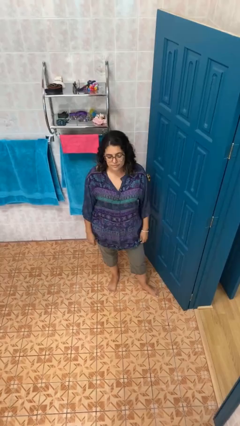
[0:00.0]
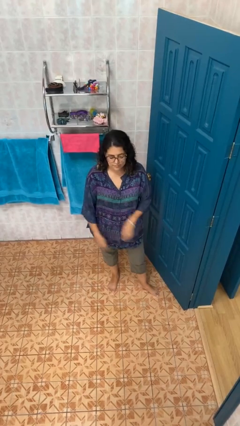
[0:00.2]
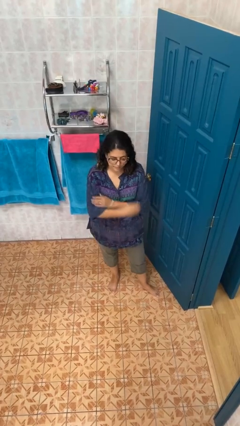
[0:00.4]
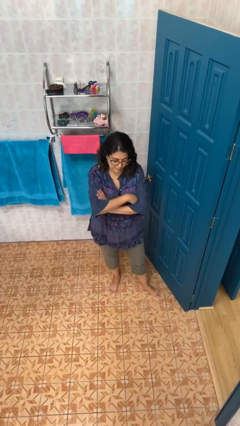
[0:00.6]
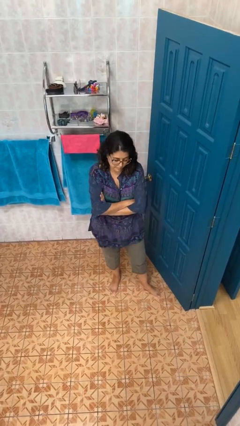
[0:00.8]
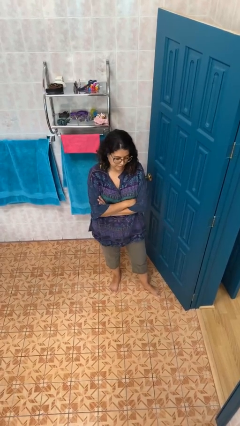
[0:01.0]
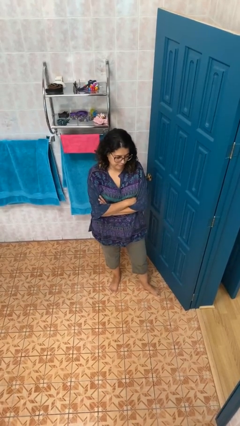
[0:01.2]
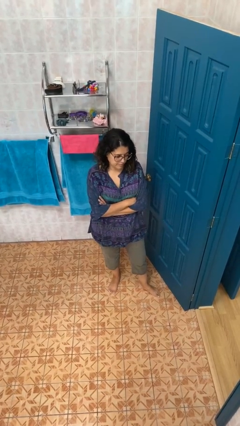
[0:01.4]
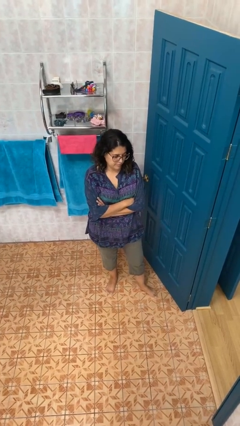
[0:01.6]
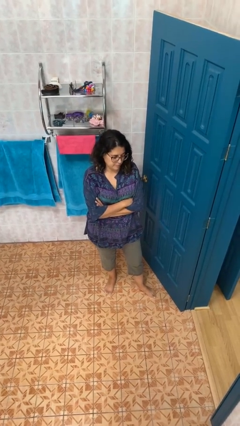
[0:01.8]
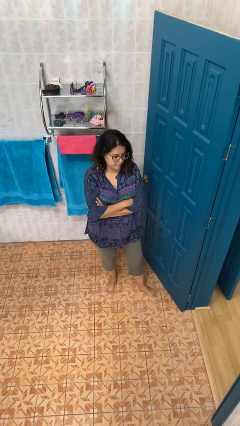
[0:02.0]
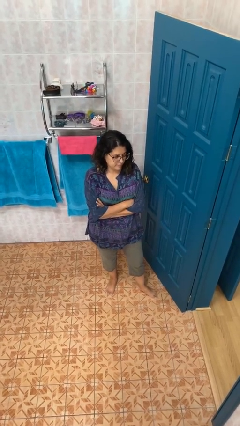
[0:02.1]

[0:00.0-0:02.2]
person crosses arms

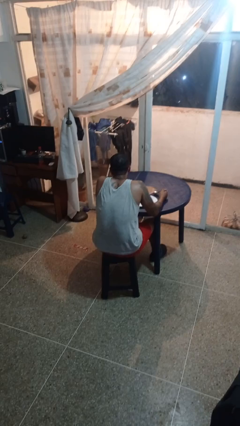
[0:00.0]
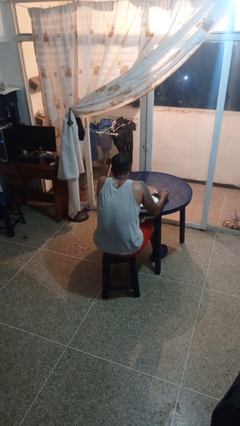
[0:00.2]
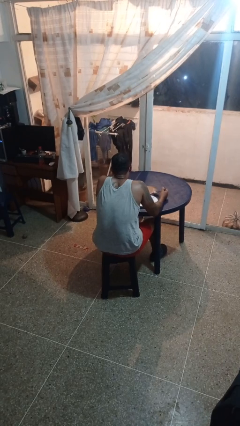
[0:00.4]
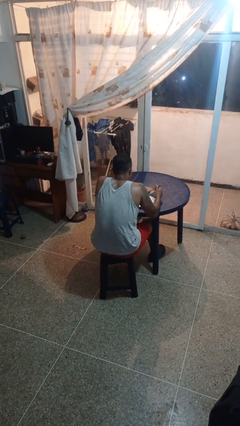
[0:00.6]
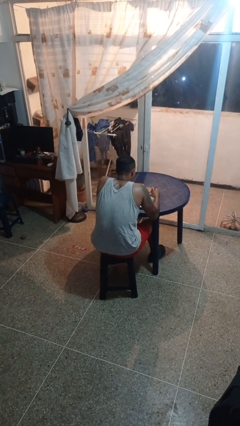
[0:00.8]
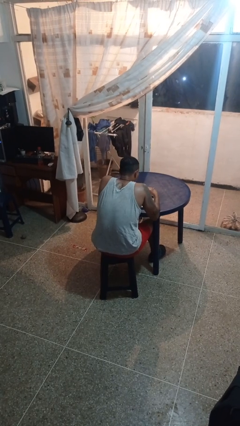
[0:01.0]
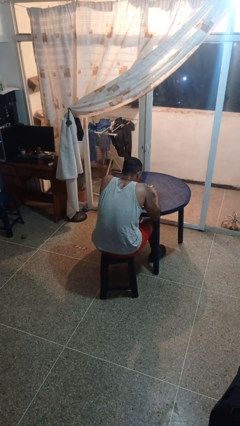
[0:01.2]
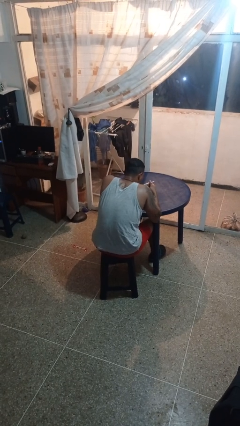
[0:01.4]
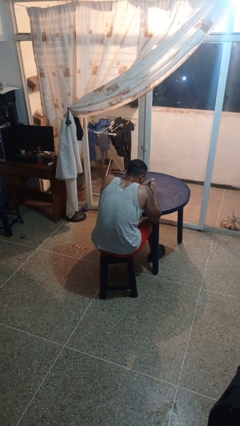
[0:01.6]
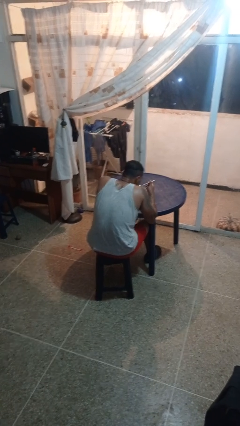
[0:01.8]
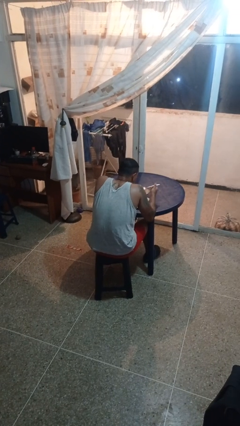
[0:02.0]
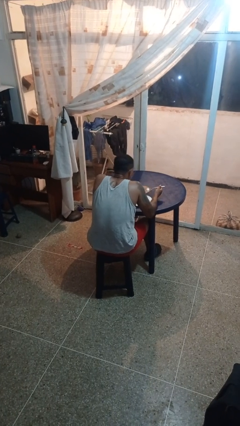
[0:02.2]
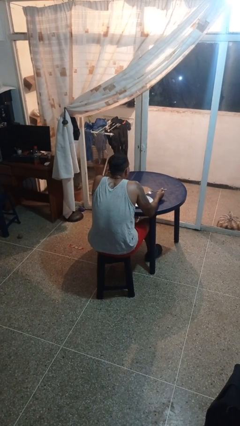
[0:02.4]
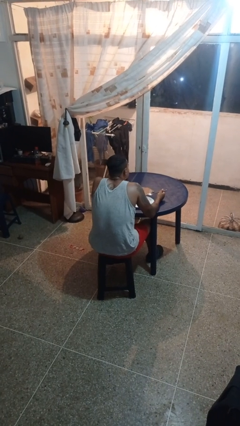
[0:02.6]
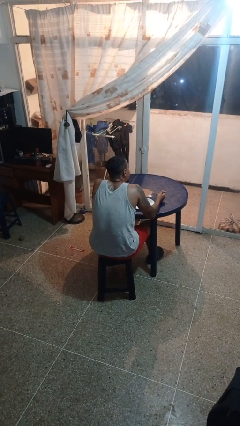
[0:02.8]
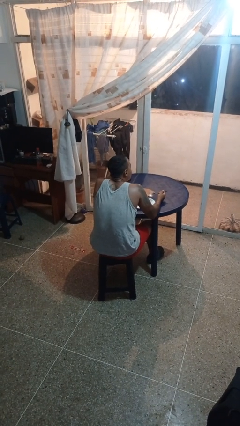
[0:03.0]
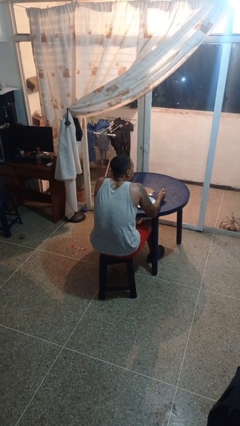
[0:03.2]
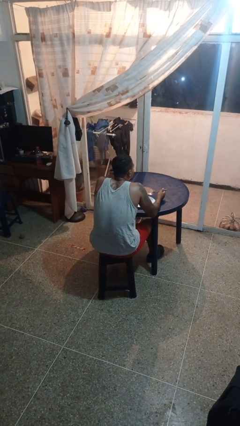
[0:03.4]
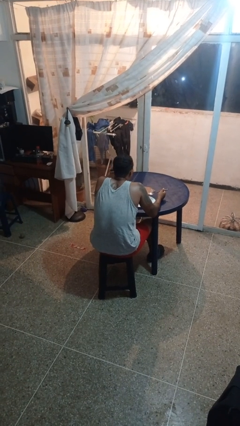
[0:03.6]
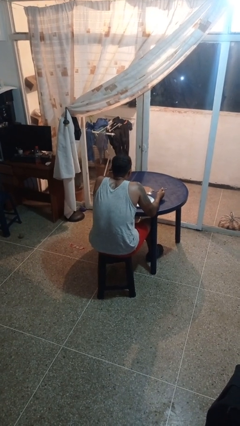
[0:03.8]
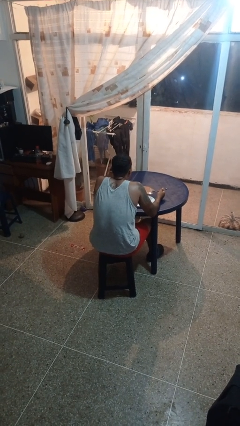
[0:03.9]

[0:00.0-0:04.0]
person eats with utensil

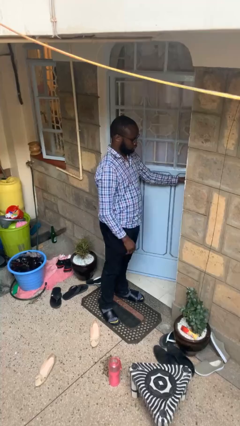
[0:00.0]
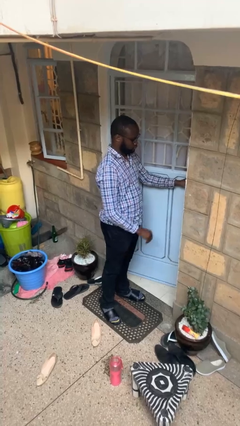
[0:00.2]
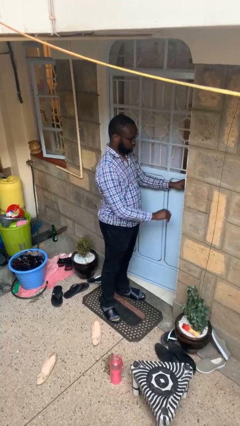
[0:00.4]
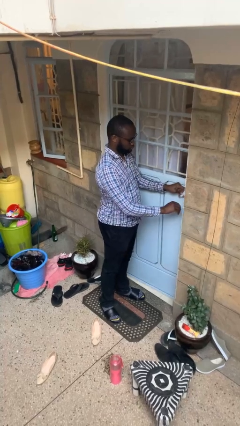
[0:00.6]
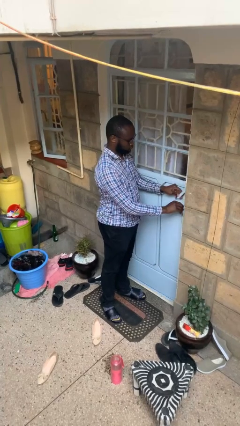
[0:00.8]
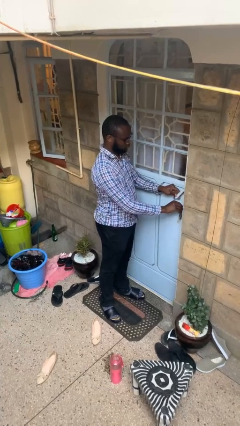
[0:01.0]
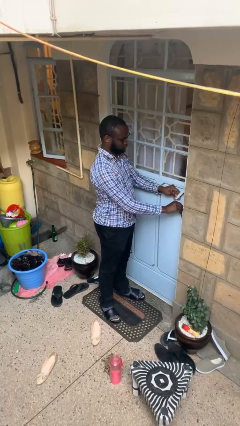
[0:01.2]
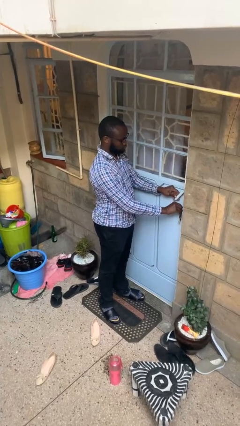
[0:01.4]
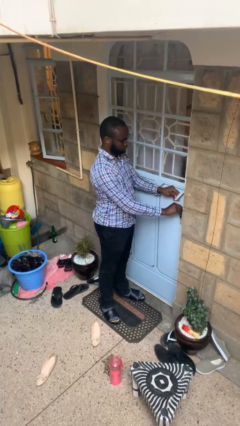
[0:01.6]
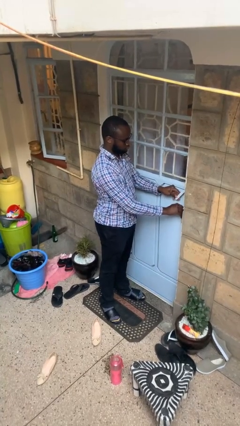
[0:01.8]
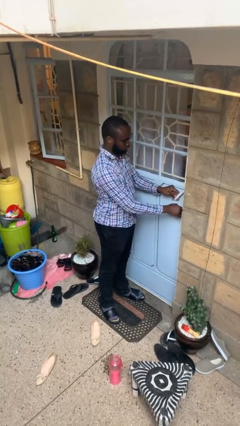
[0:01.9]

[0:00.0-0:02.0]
person closes facility door

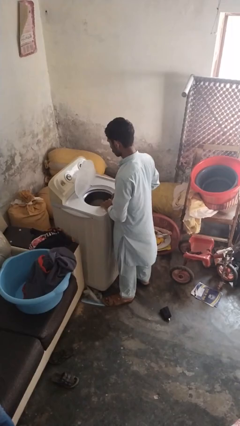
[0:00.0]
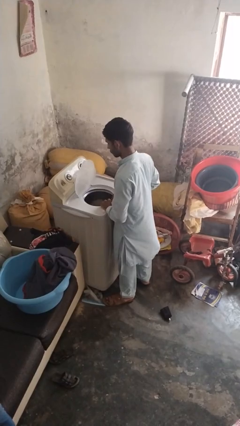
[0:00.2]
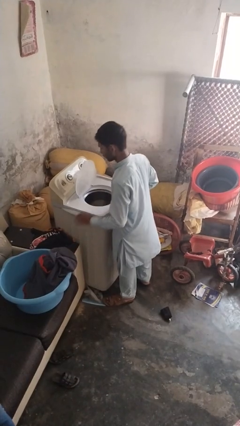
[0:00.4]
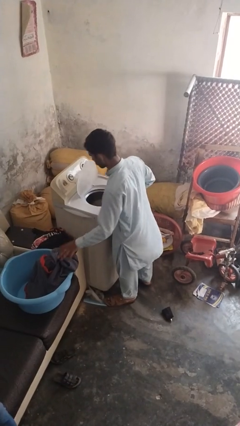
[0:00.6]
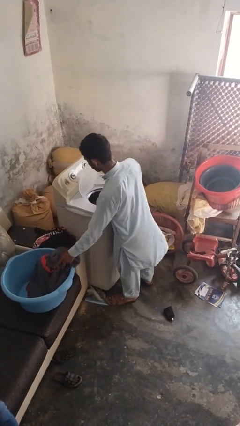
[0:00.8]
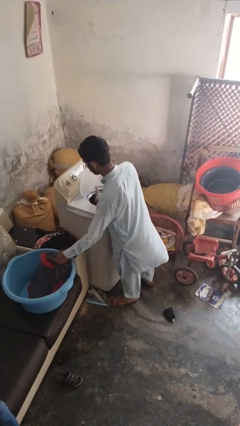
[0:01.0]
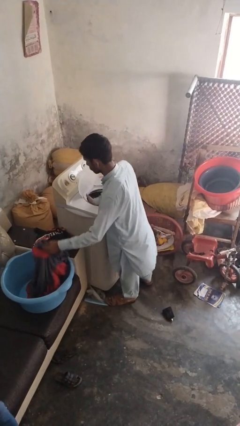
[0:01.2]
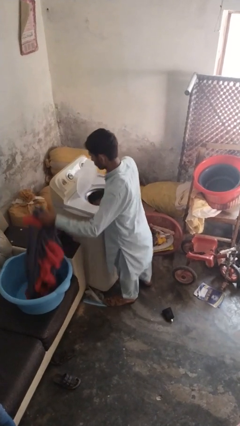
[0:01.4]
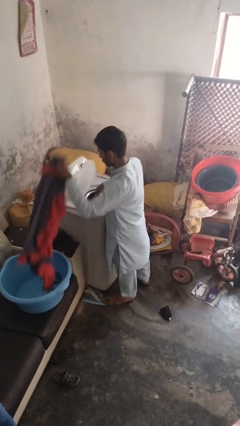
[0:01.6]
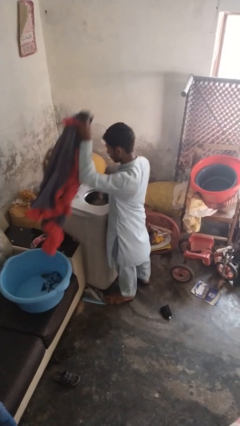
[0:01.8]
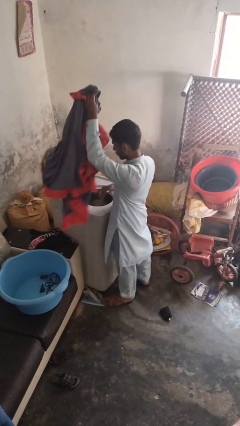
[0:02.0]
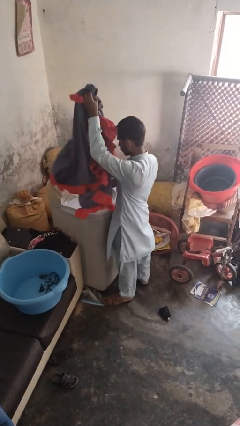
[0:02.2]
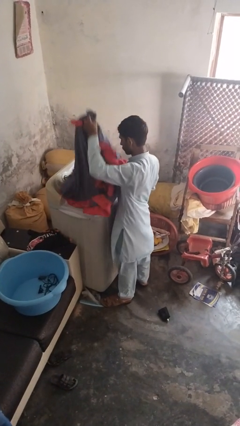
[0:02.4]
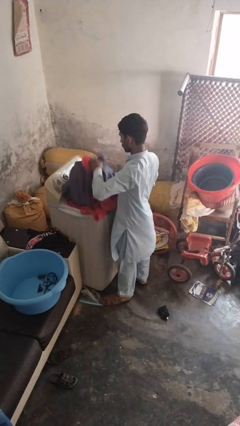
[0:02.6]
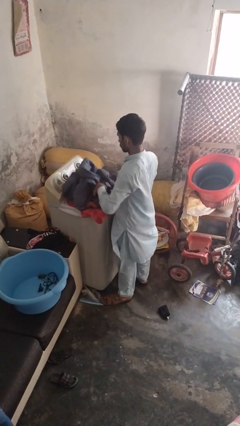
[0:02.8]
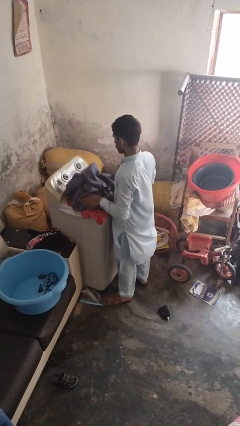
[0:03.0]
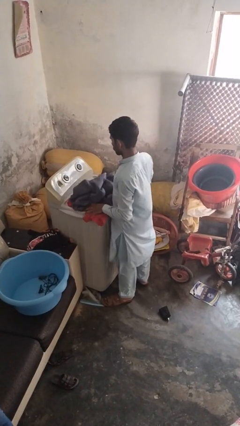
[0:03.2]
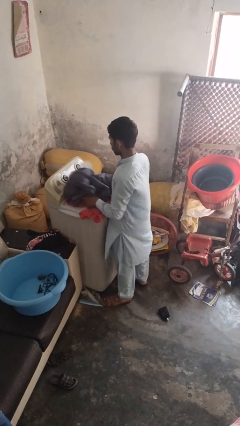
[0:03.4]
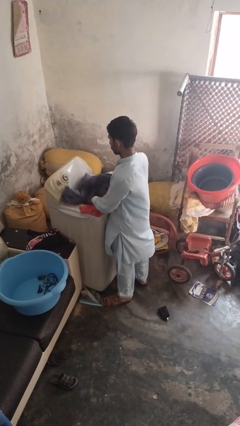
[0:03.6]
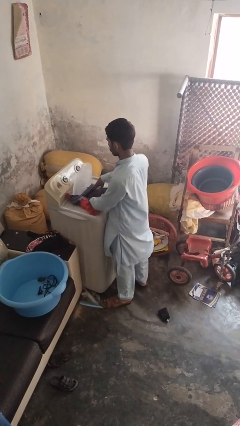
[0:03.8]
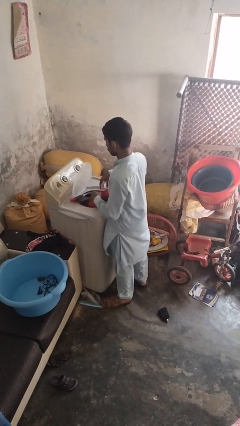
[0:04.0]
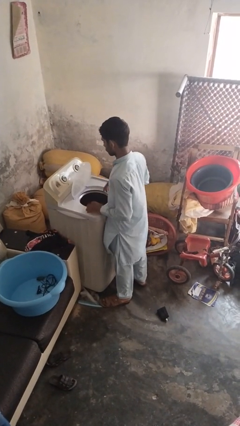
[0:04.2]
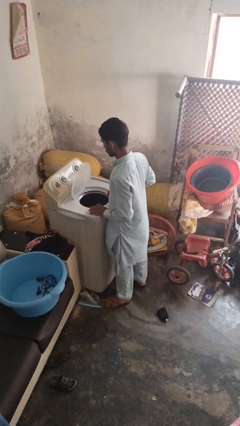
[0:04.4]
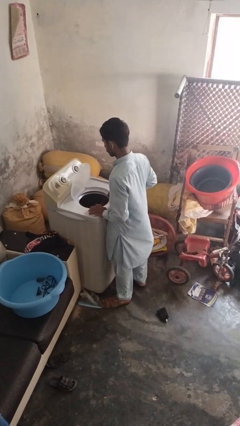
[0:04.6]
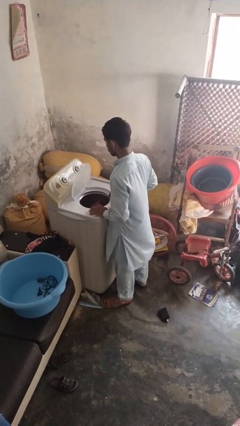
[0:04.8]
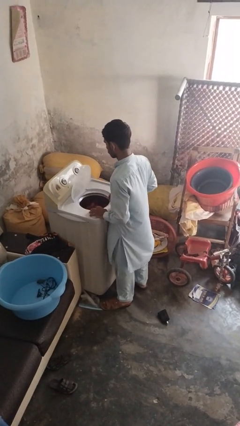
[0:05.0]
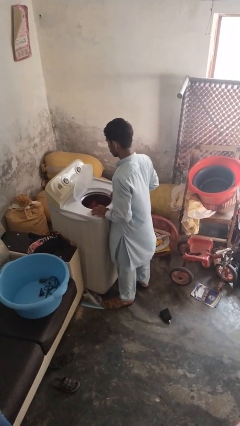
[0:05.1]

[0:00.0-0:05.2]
person loads clotheswasher

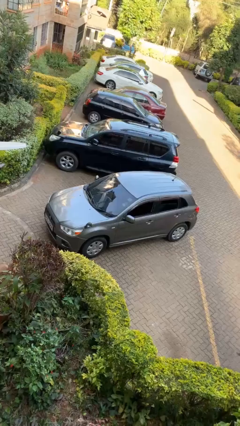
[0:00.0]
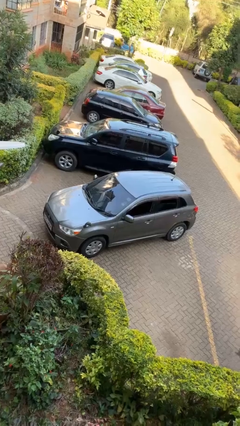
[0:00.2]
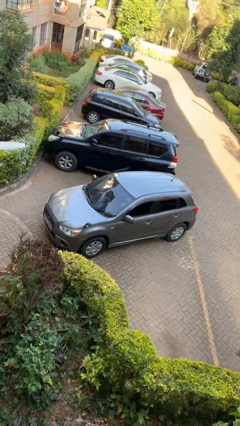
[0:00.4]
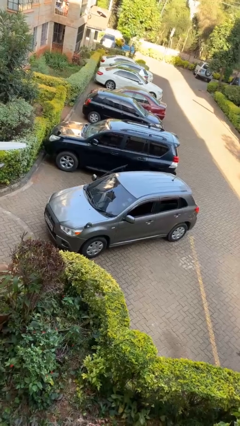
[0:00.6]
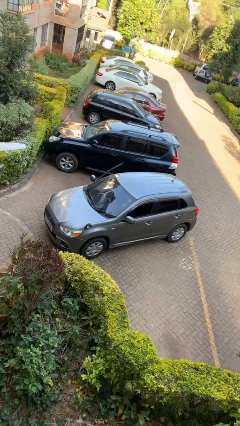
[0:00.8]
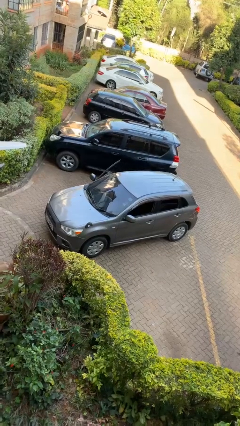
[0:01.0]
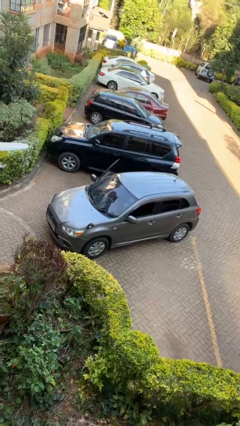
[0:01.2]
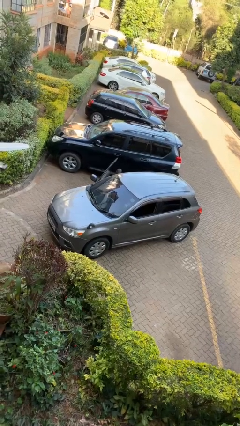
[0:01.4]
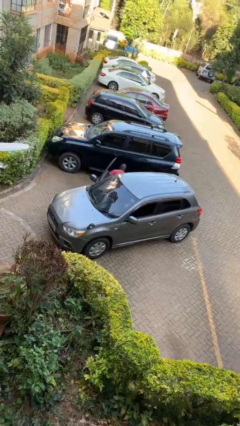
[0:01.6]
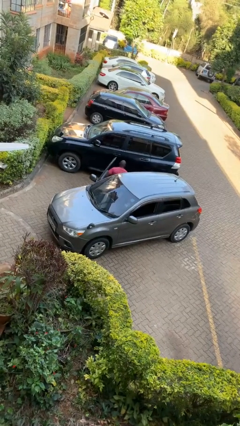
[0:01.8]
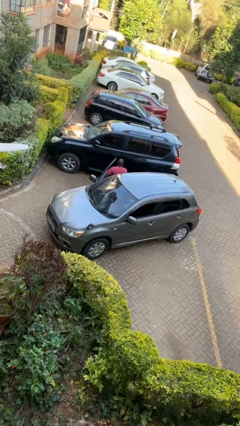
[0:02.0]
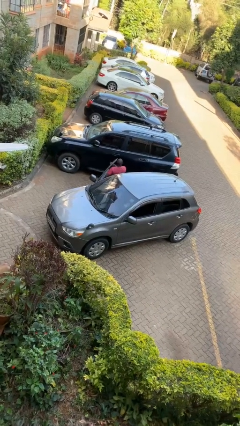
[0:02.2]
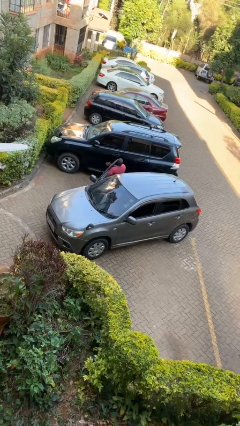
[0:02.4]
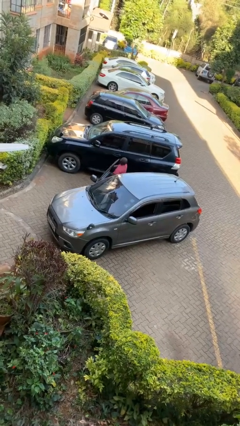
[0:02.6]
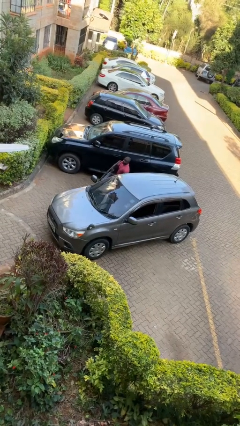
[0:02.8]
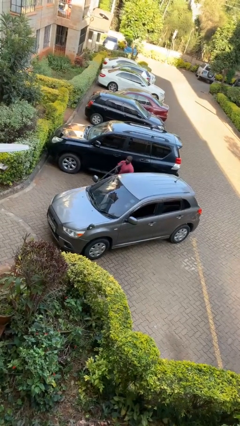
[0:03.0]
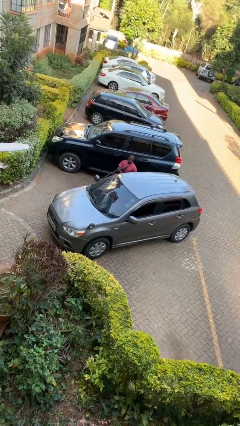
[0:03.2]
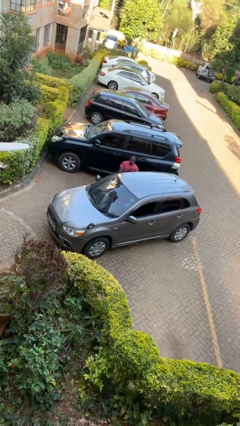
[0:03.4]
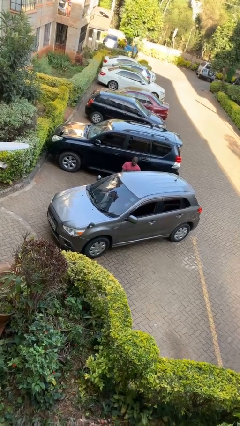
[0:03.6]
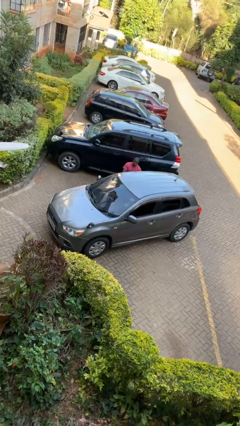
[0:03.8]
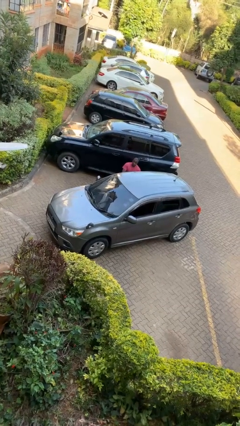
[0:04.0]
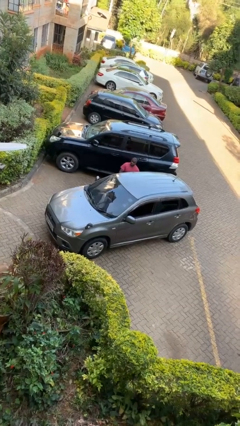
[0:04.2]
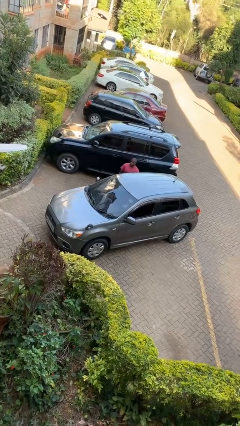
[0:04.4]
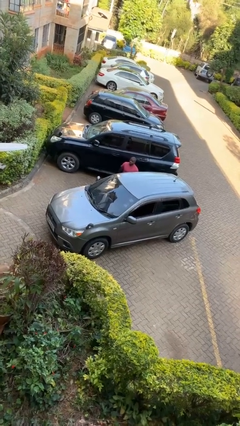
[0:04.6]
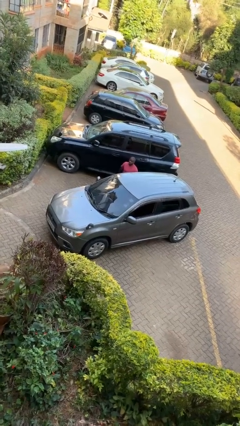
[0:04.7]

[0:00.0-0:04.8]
car drops off person
